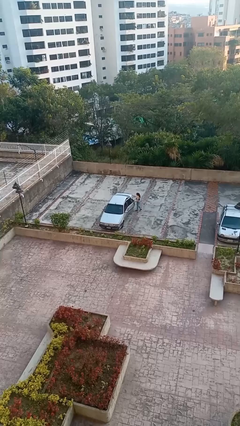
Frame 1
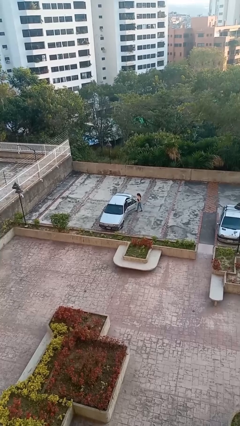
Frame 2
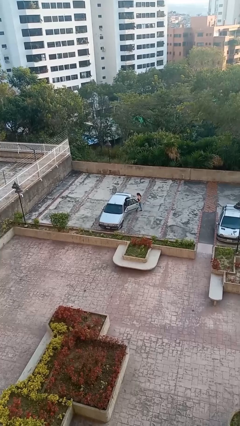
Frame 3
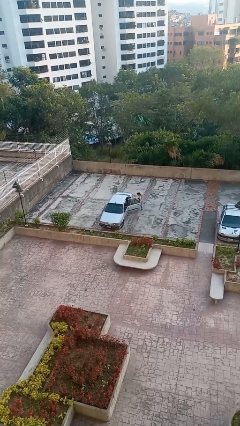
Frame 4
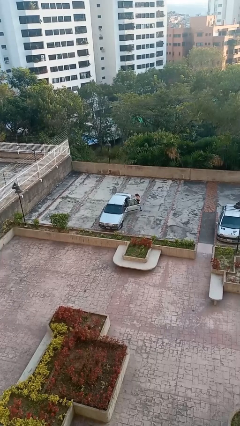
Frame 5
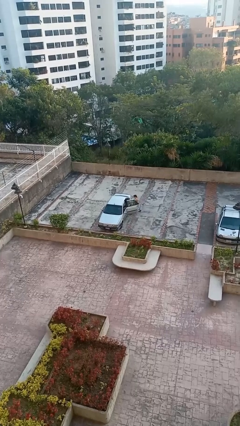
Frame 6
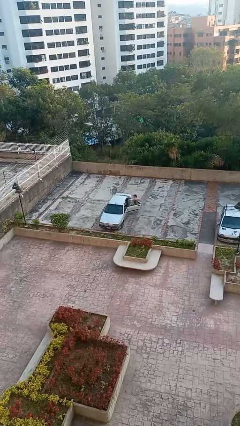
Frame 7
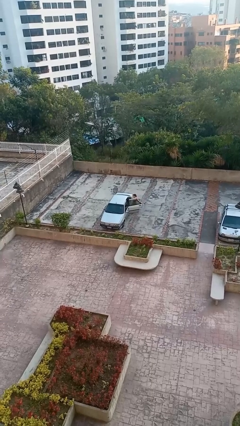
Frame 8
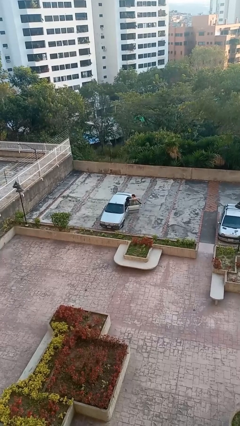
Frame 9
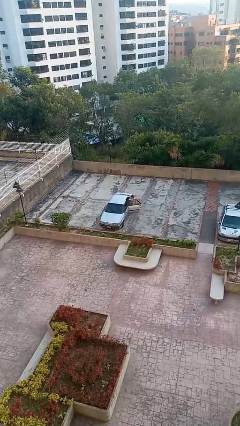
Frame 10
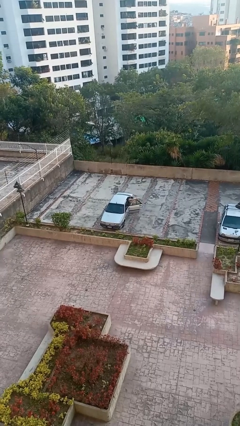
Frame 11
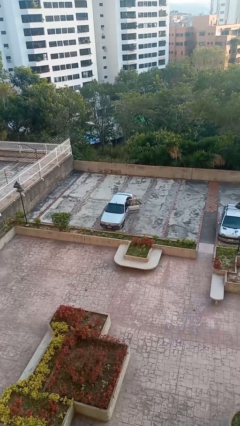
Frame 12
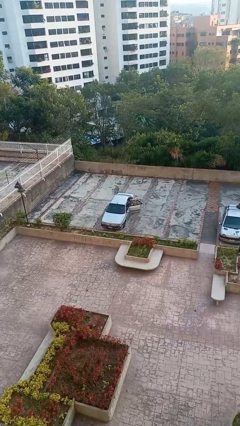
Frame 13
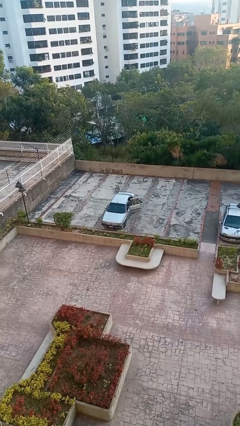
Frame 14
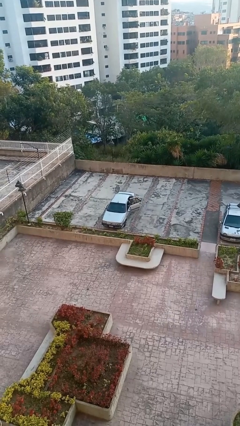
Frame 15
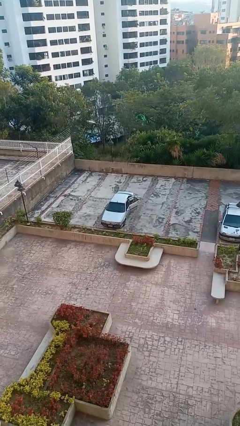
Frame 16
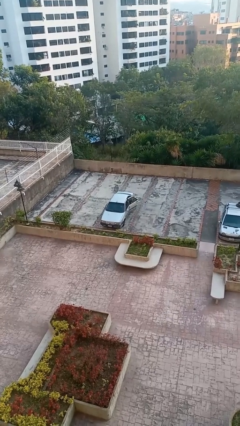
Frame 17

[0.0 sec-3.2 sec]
car picks up person

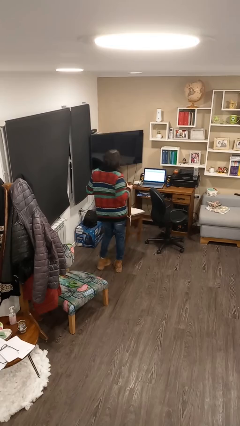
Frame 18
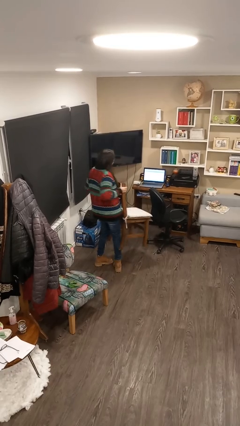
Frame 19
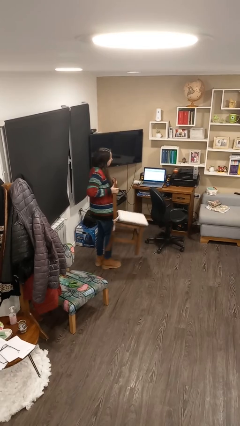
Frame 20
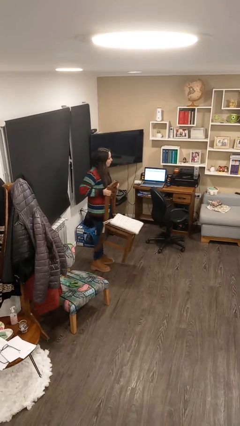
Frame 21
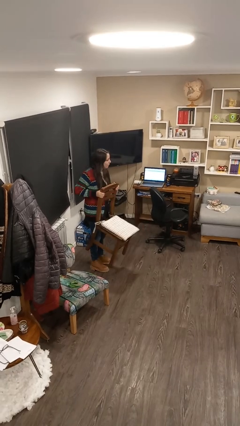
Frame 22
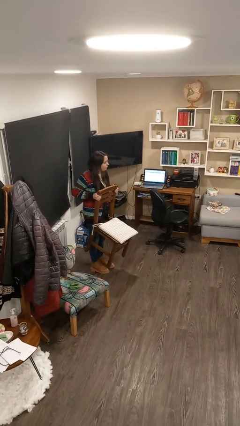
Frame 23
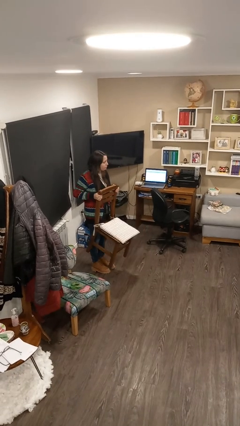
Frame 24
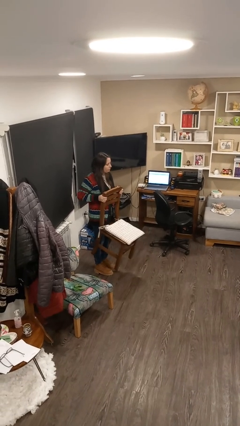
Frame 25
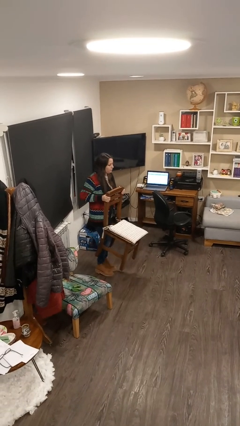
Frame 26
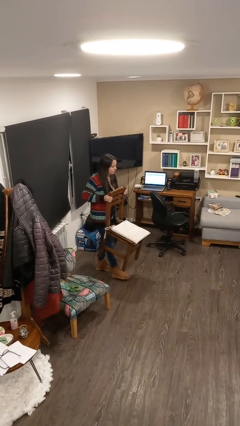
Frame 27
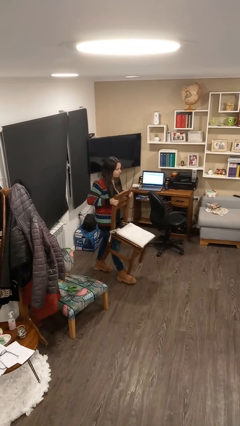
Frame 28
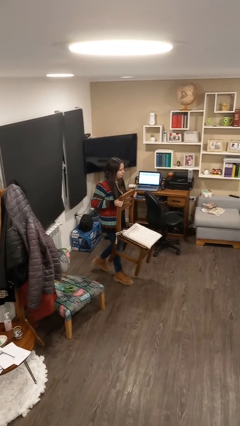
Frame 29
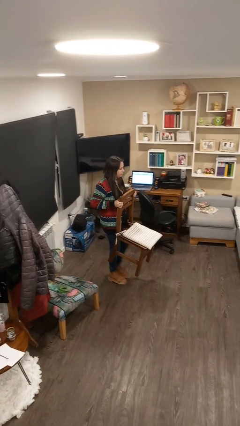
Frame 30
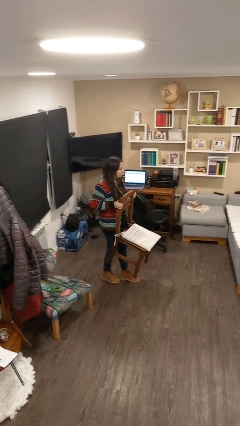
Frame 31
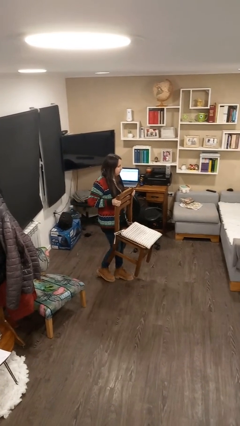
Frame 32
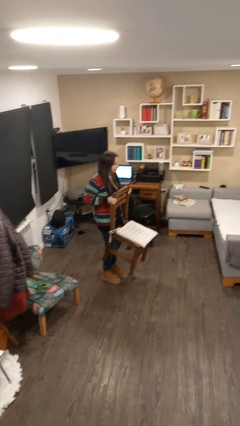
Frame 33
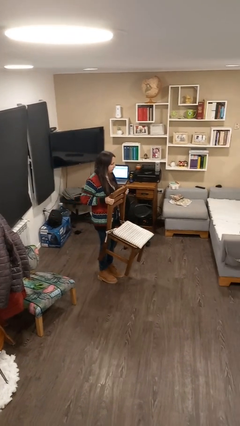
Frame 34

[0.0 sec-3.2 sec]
person carries furniture

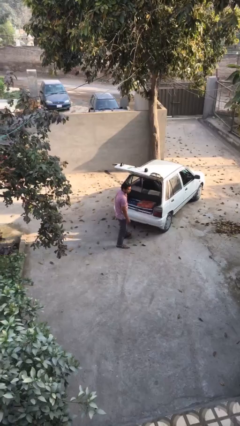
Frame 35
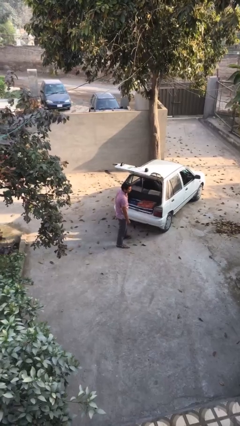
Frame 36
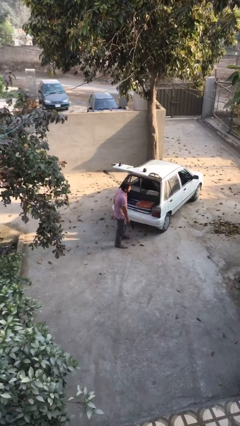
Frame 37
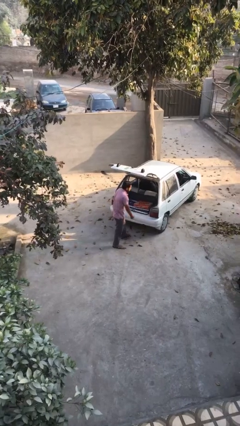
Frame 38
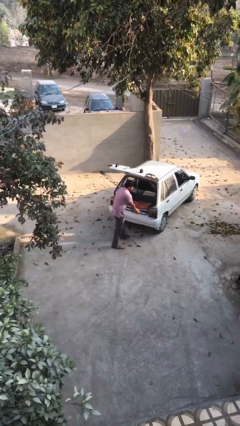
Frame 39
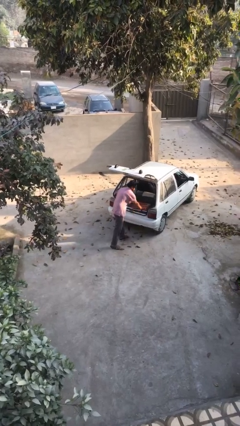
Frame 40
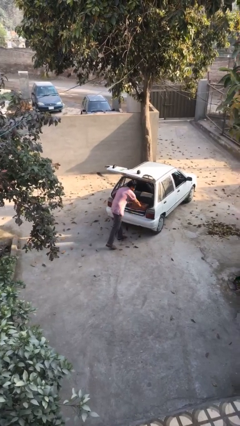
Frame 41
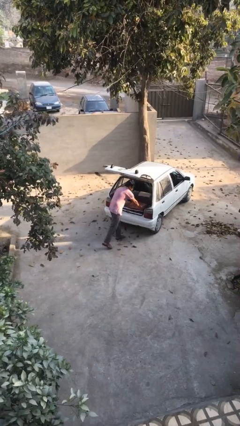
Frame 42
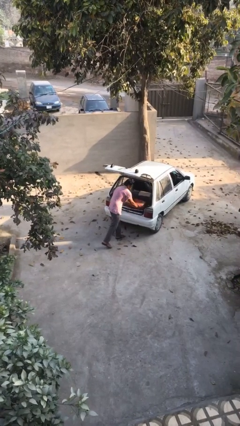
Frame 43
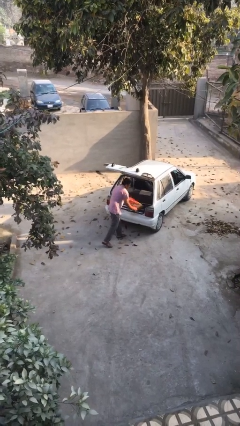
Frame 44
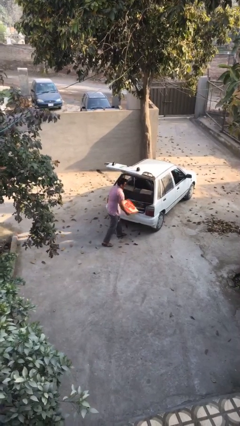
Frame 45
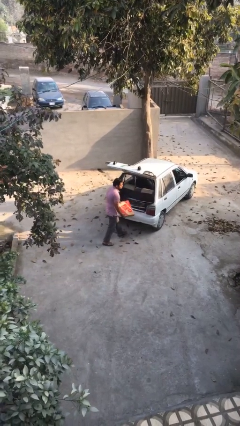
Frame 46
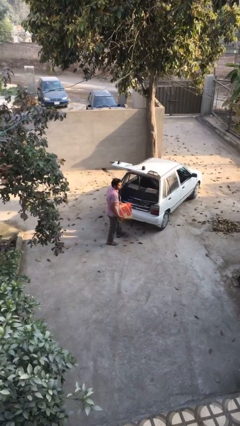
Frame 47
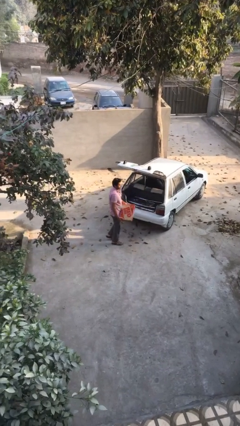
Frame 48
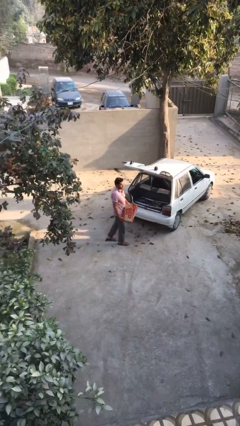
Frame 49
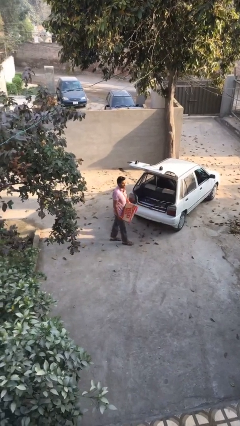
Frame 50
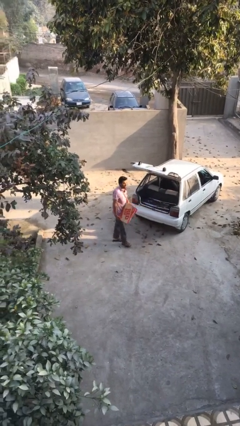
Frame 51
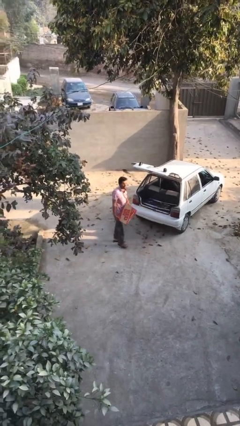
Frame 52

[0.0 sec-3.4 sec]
person unloads car

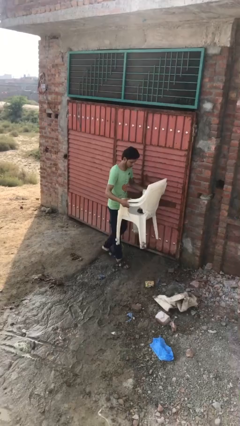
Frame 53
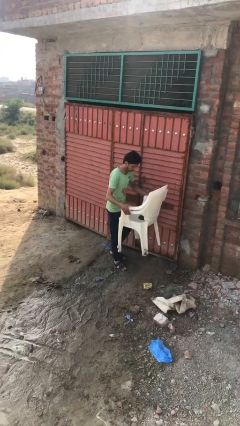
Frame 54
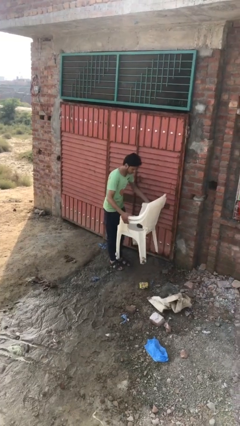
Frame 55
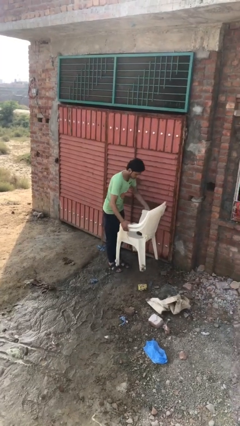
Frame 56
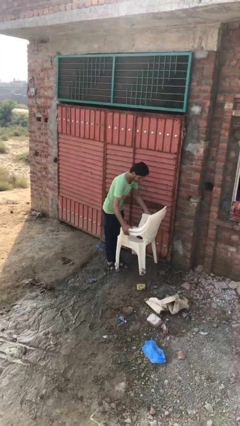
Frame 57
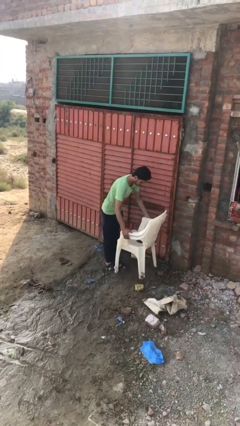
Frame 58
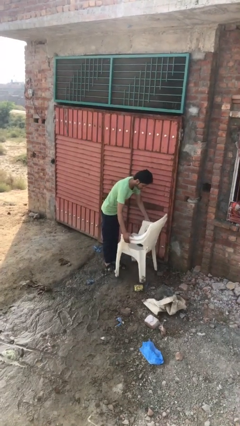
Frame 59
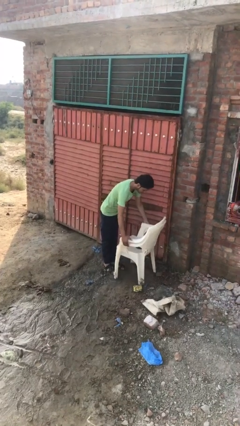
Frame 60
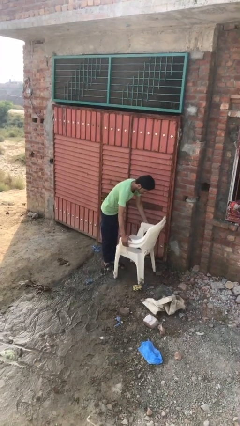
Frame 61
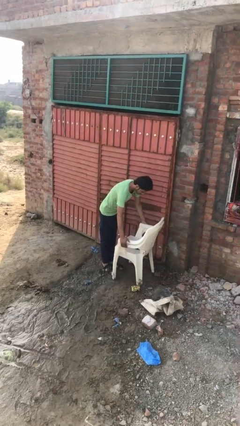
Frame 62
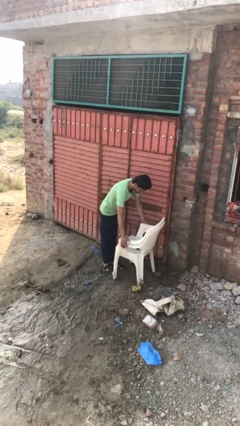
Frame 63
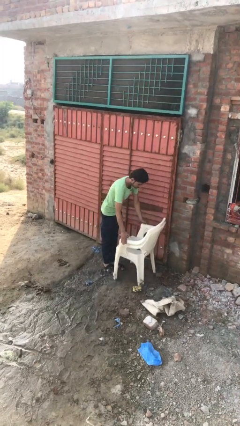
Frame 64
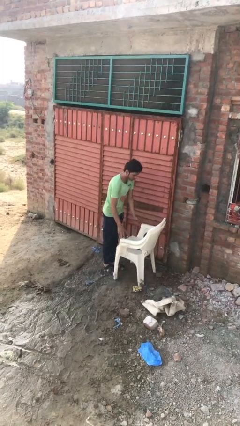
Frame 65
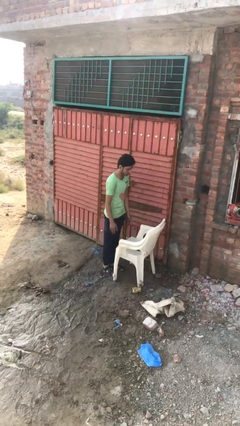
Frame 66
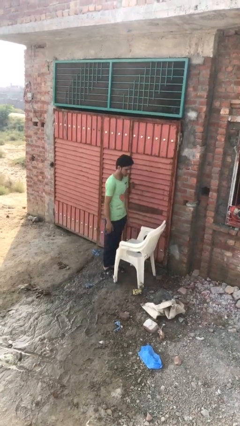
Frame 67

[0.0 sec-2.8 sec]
person puts down object on floor

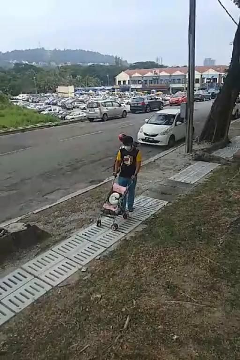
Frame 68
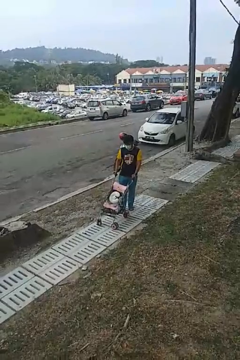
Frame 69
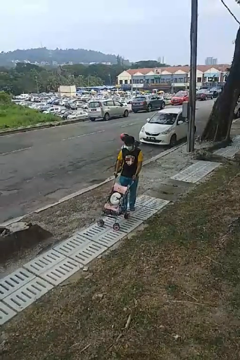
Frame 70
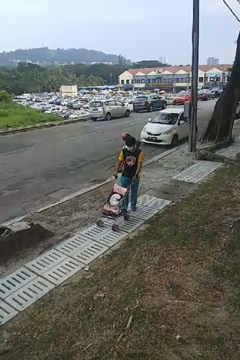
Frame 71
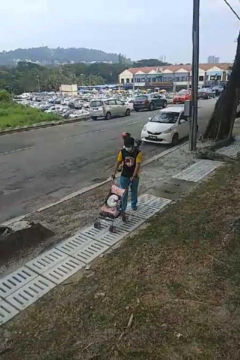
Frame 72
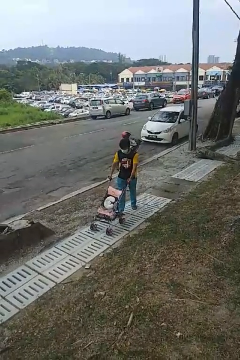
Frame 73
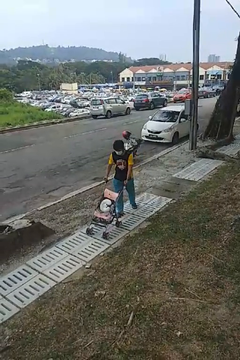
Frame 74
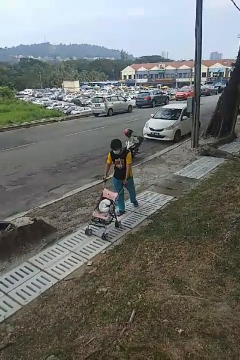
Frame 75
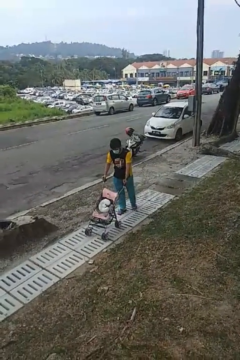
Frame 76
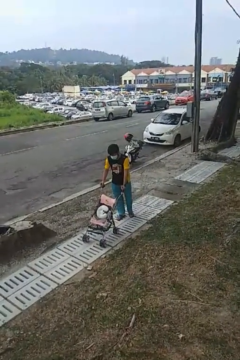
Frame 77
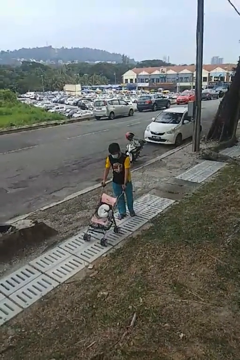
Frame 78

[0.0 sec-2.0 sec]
person pushes wheeled cart

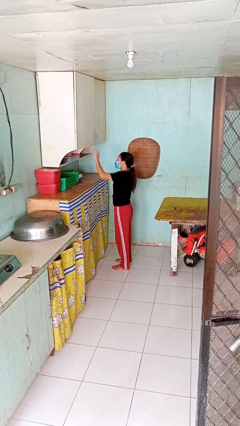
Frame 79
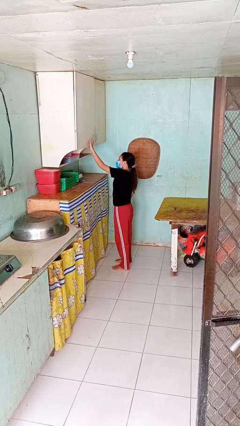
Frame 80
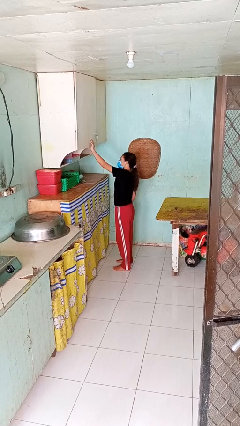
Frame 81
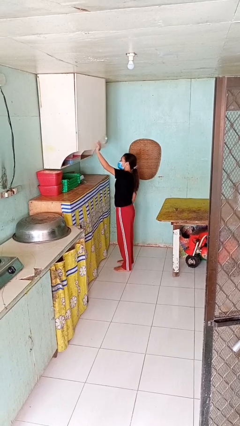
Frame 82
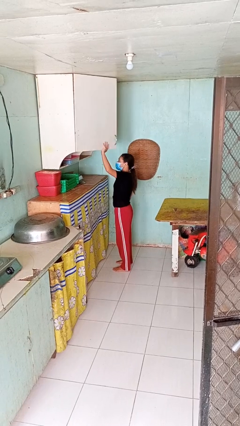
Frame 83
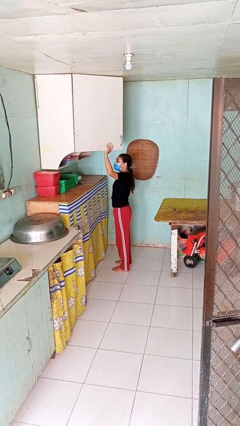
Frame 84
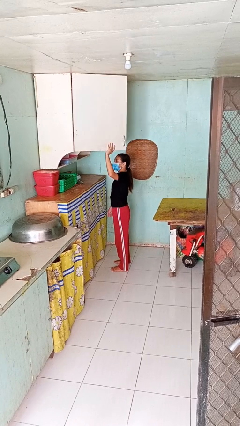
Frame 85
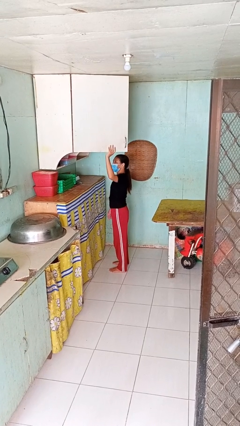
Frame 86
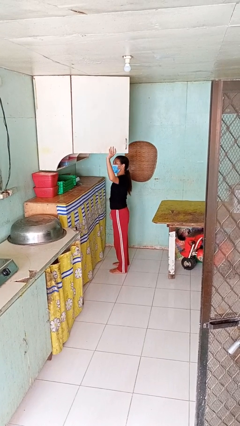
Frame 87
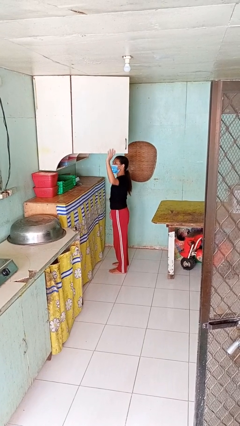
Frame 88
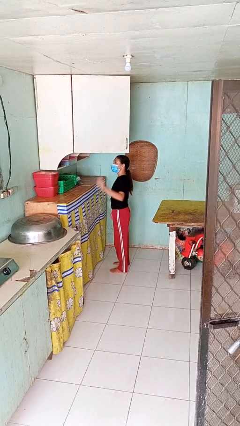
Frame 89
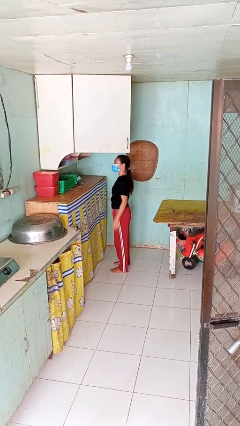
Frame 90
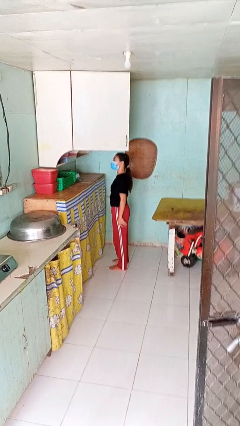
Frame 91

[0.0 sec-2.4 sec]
person opens cabinet

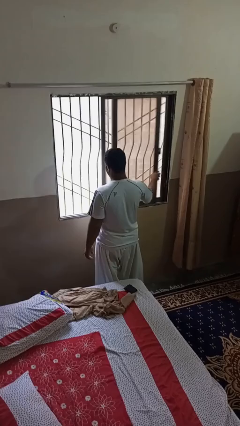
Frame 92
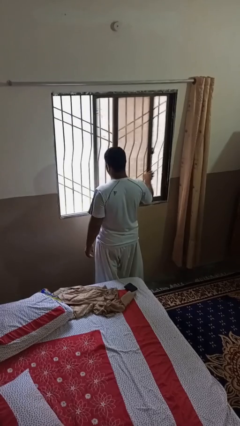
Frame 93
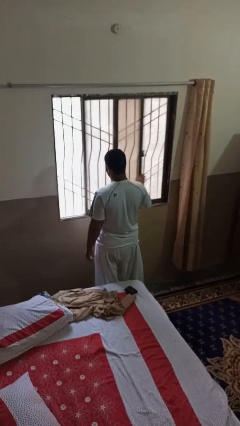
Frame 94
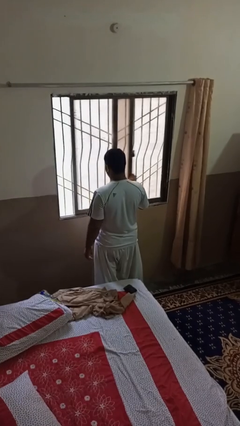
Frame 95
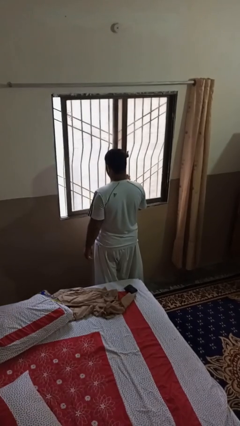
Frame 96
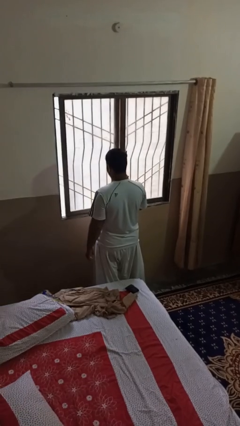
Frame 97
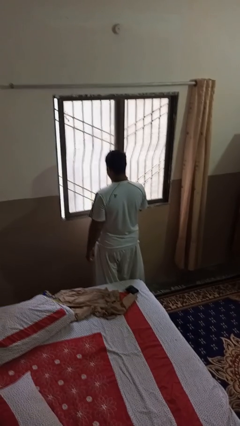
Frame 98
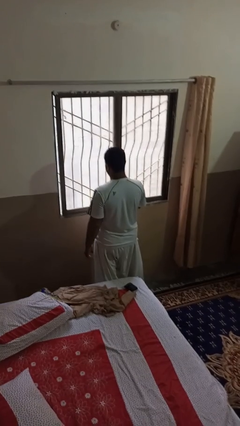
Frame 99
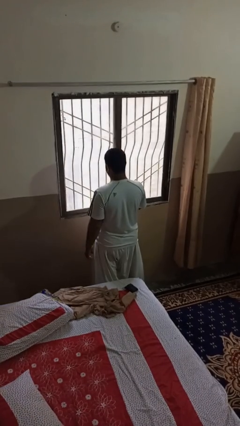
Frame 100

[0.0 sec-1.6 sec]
person closes home window
